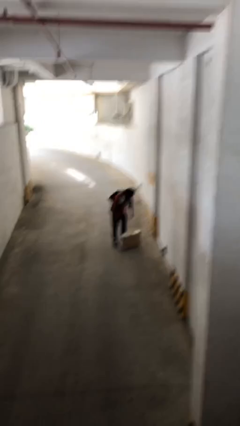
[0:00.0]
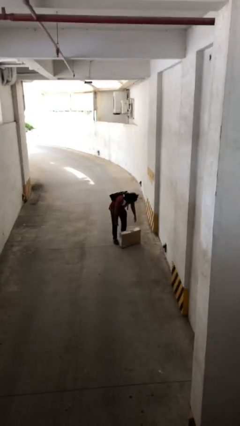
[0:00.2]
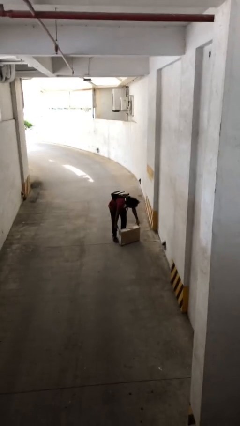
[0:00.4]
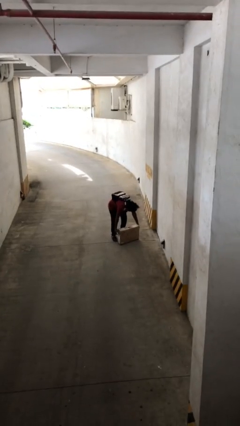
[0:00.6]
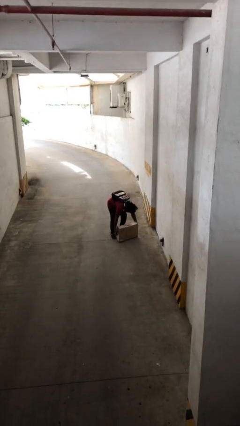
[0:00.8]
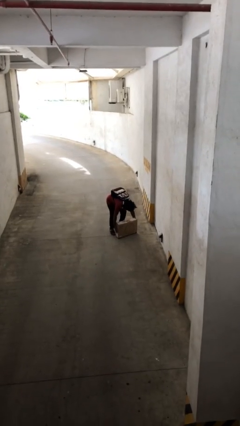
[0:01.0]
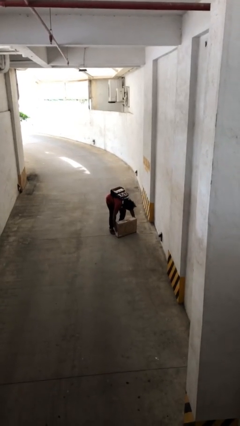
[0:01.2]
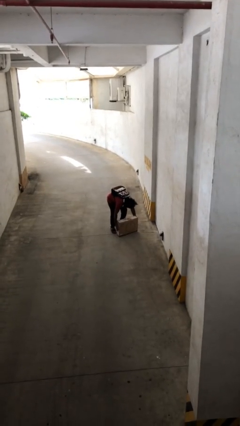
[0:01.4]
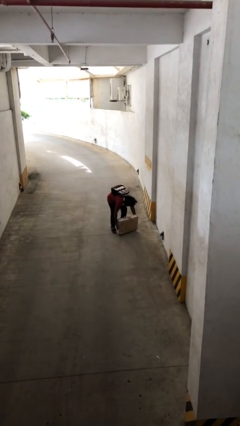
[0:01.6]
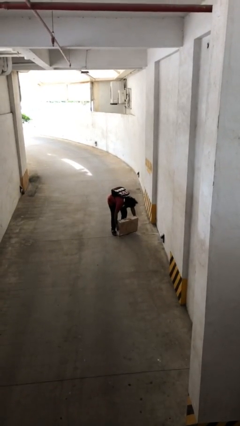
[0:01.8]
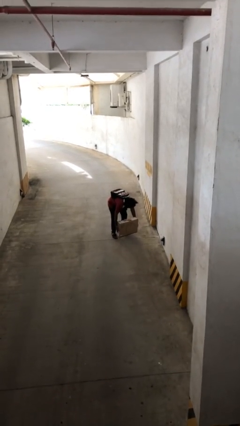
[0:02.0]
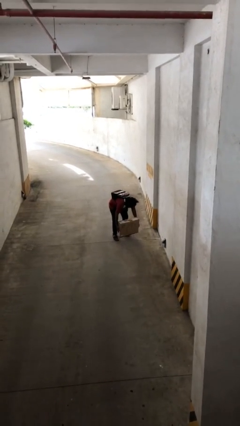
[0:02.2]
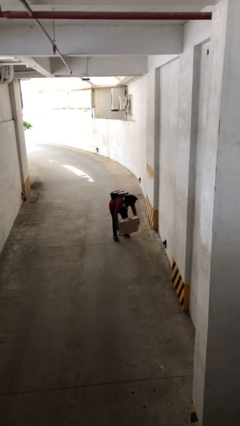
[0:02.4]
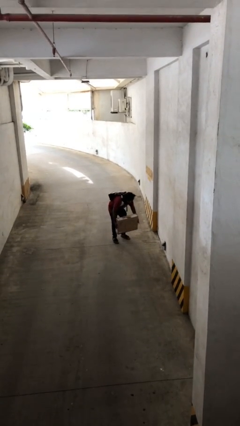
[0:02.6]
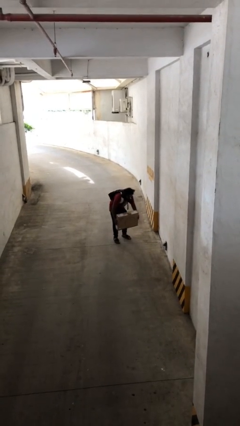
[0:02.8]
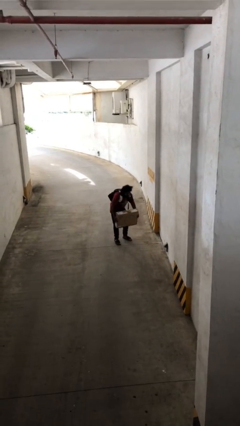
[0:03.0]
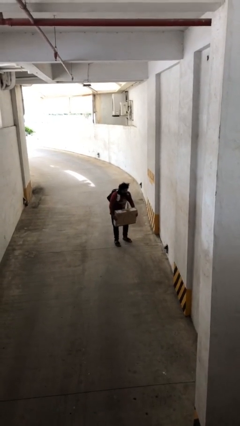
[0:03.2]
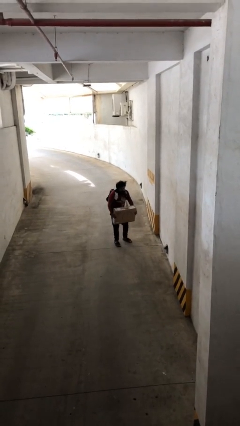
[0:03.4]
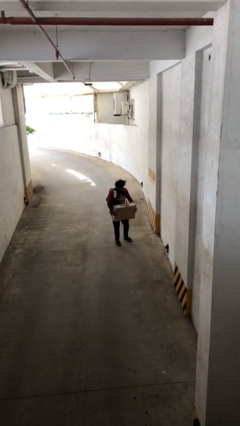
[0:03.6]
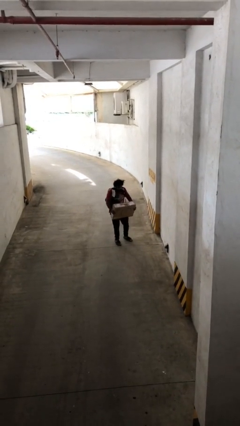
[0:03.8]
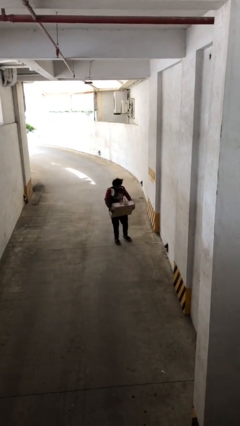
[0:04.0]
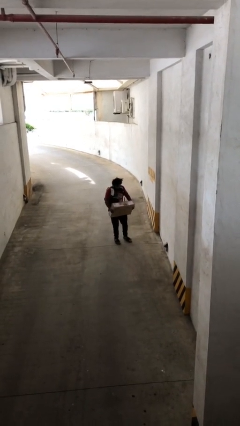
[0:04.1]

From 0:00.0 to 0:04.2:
person picks up object from floor

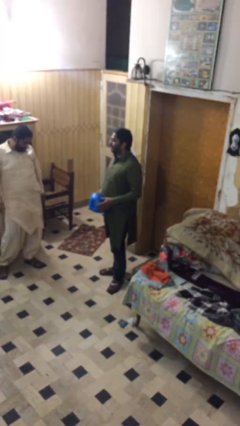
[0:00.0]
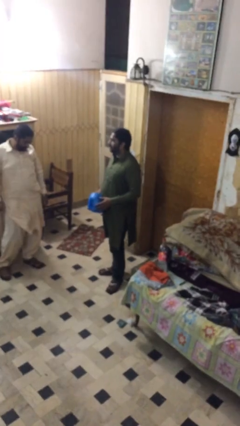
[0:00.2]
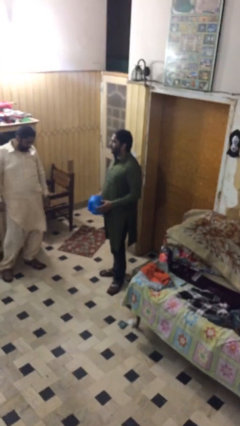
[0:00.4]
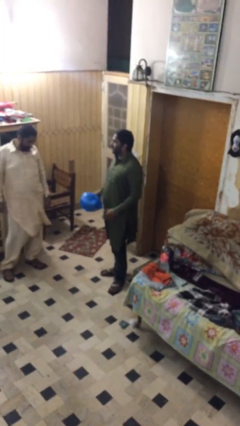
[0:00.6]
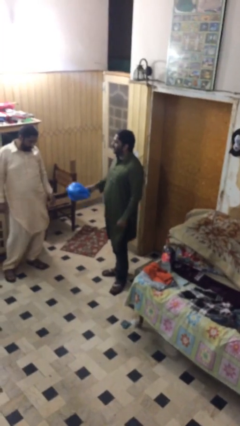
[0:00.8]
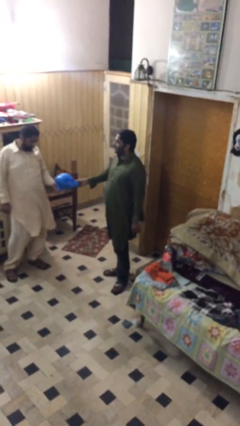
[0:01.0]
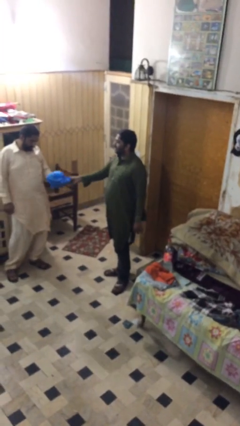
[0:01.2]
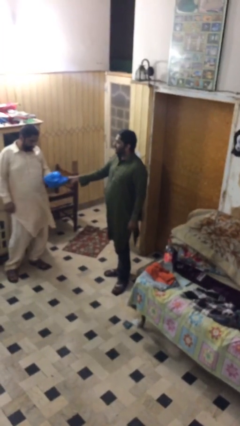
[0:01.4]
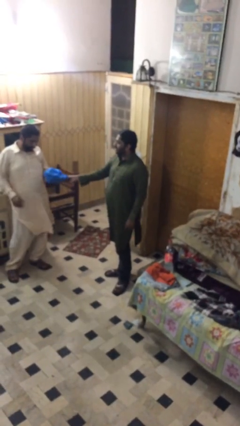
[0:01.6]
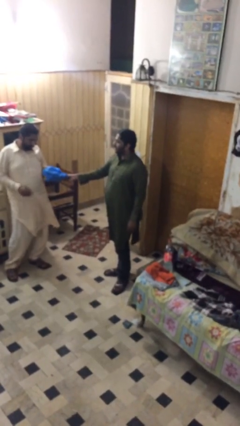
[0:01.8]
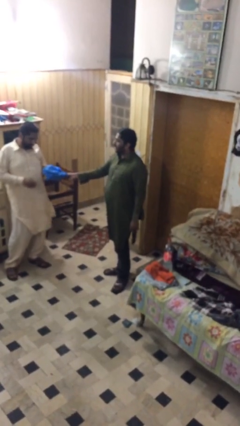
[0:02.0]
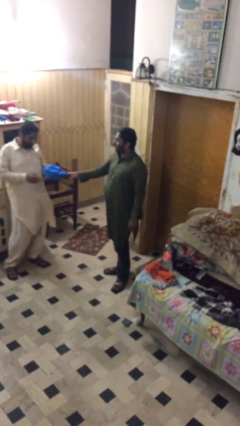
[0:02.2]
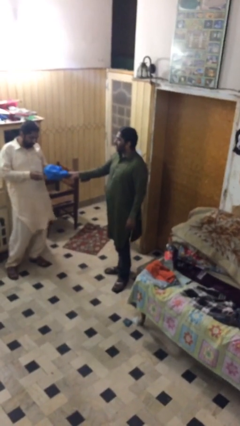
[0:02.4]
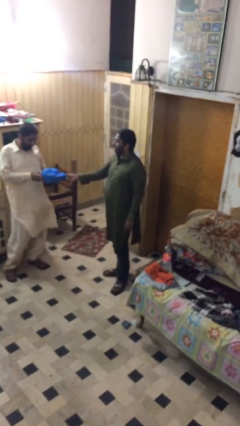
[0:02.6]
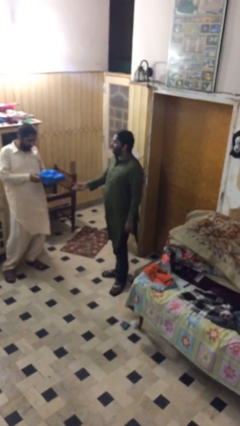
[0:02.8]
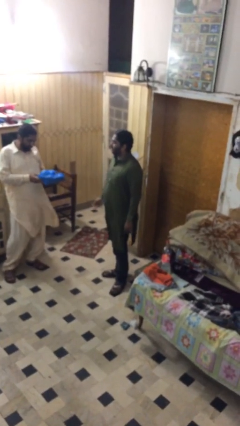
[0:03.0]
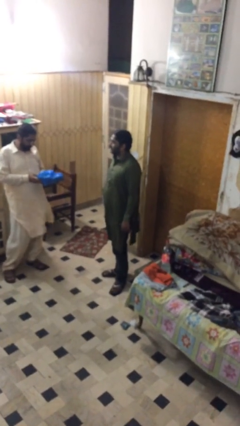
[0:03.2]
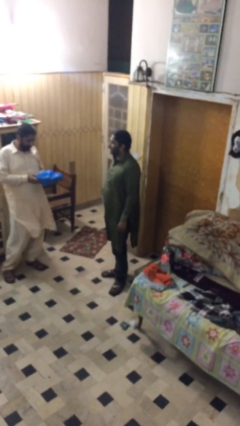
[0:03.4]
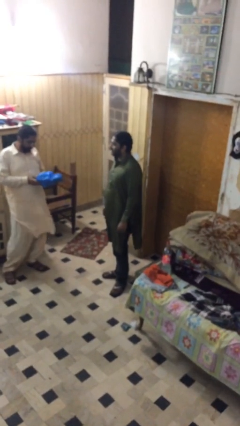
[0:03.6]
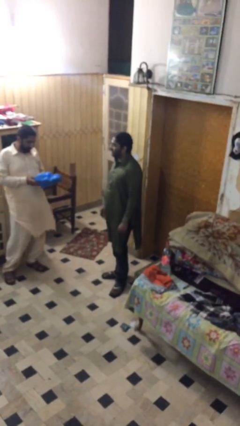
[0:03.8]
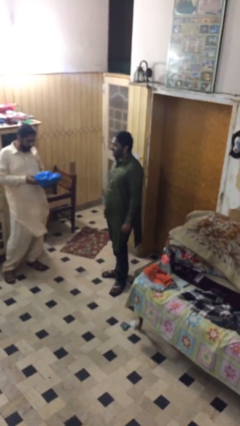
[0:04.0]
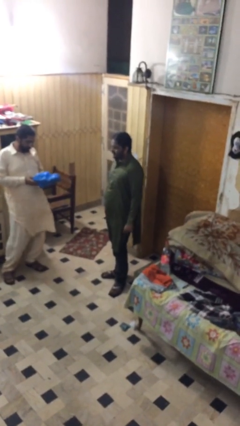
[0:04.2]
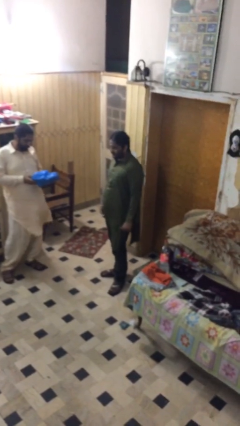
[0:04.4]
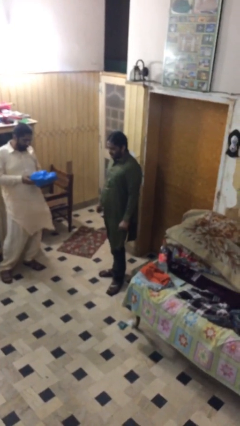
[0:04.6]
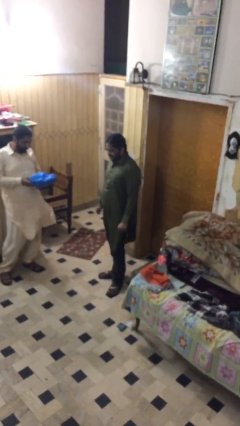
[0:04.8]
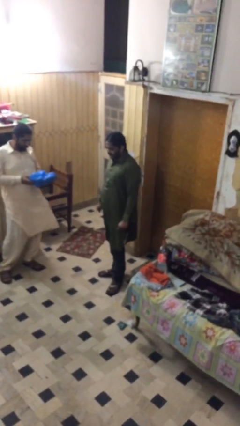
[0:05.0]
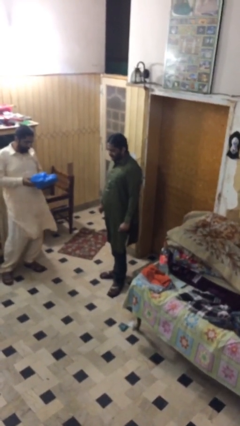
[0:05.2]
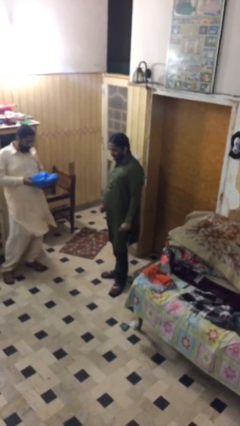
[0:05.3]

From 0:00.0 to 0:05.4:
person transfers object to person

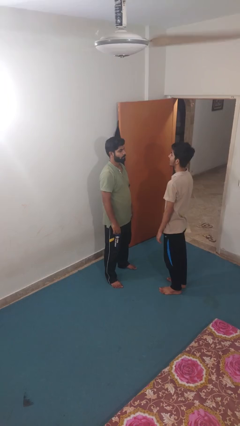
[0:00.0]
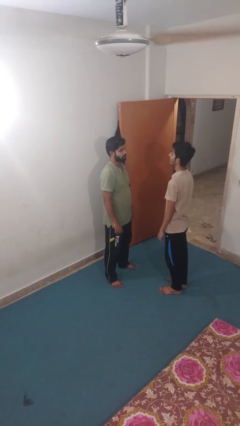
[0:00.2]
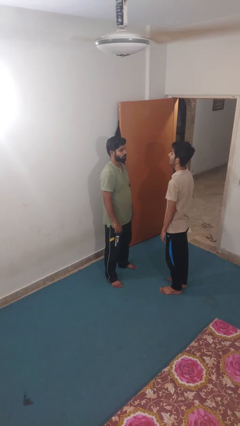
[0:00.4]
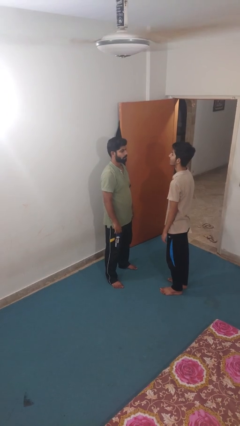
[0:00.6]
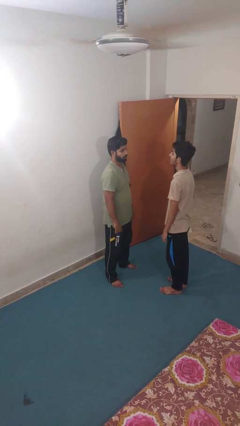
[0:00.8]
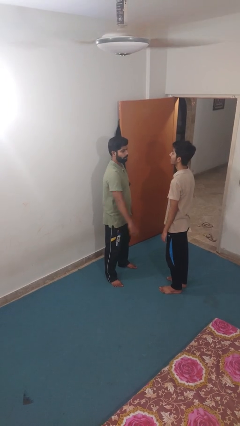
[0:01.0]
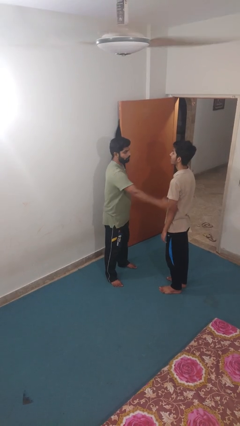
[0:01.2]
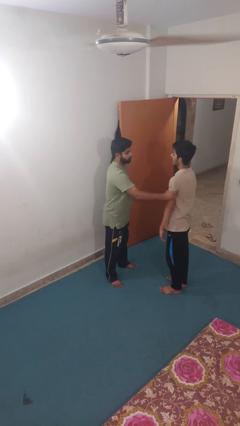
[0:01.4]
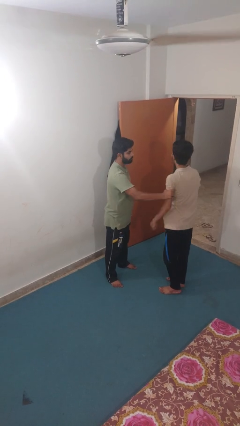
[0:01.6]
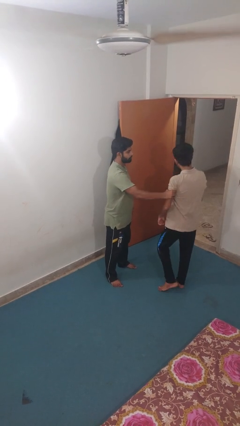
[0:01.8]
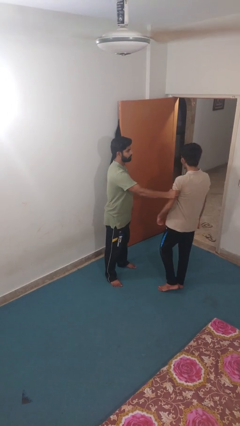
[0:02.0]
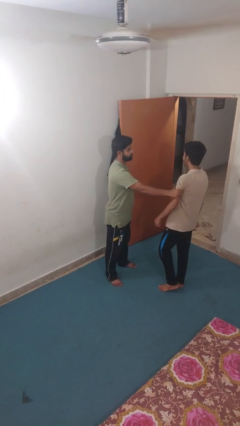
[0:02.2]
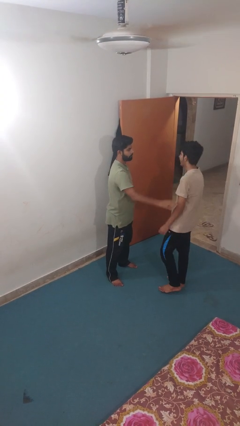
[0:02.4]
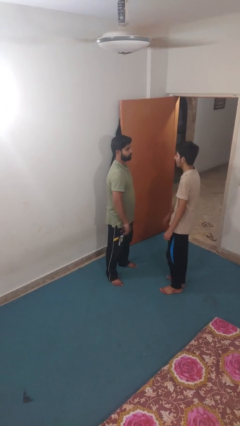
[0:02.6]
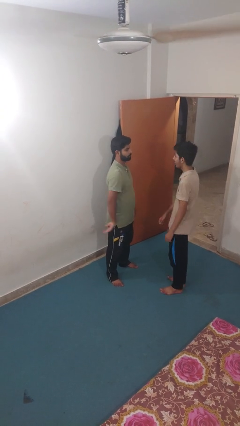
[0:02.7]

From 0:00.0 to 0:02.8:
person grabs person by bicep

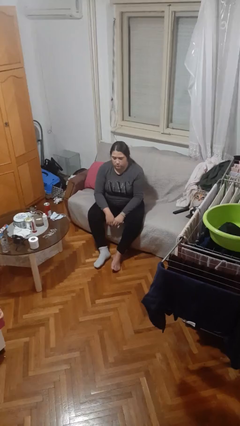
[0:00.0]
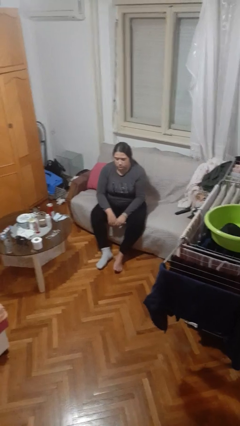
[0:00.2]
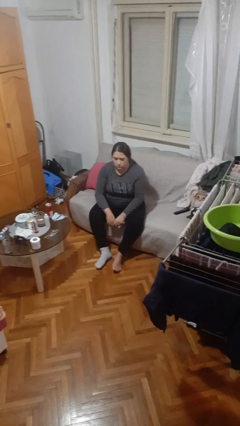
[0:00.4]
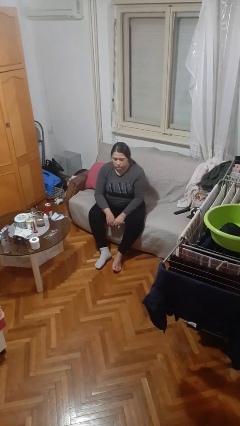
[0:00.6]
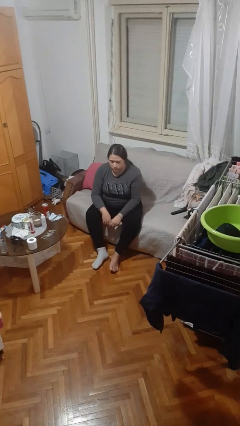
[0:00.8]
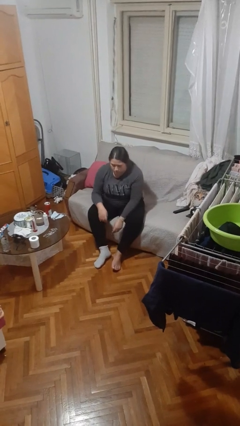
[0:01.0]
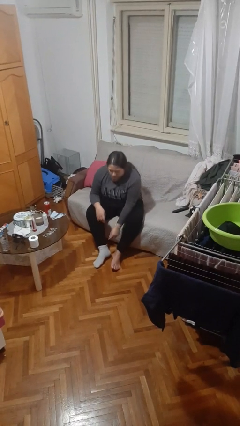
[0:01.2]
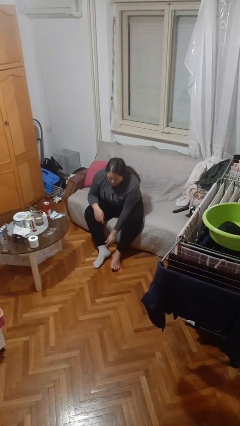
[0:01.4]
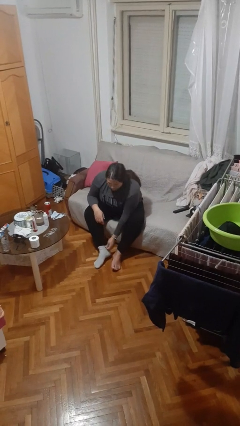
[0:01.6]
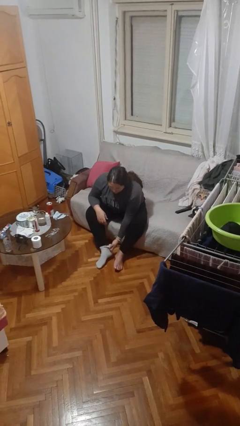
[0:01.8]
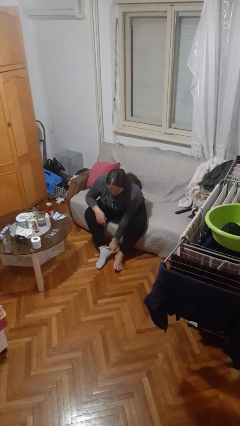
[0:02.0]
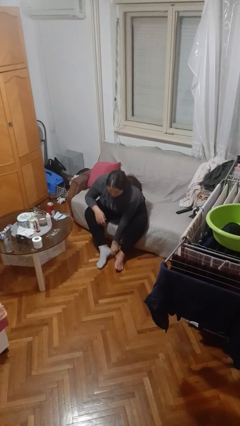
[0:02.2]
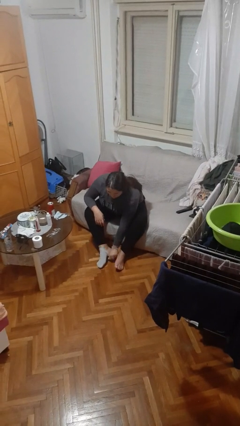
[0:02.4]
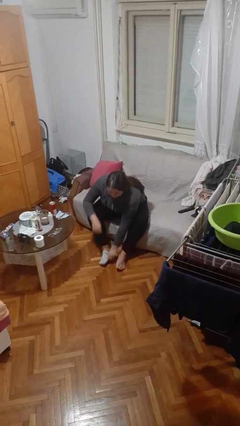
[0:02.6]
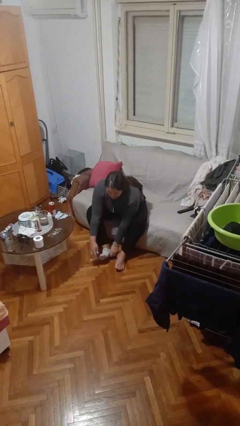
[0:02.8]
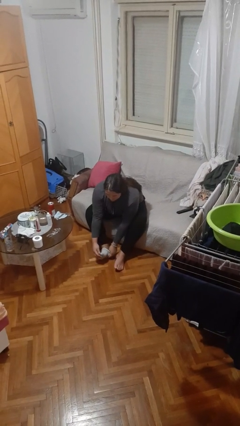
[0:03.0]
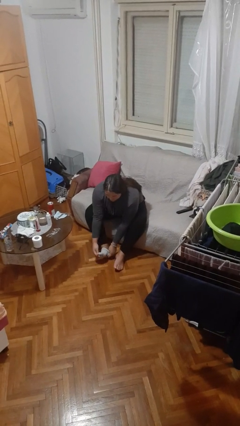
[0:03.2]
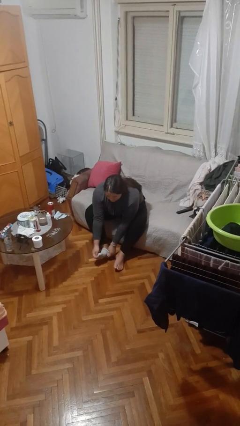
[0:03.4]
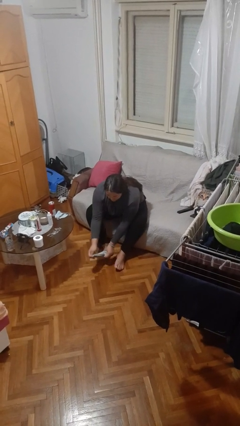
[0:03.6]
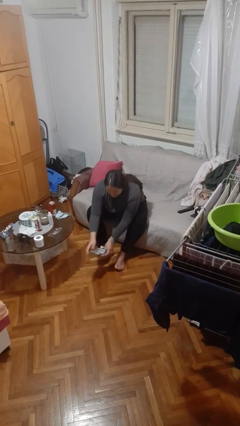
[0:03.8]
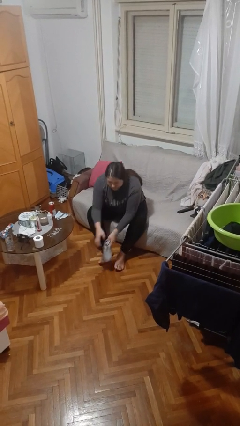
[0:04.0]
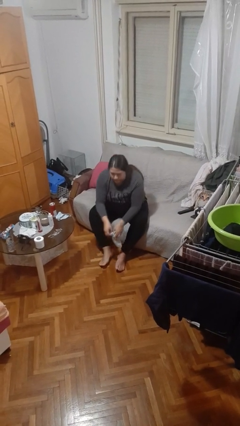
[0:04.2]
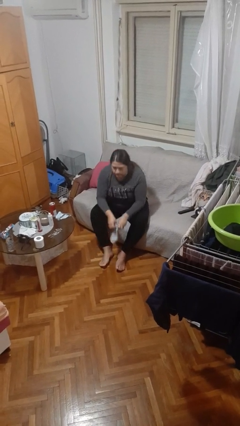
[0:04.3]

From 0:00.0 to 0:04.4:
person takes off socks

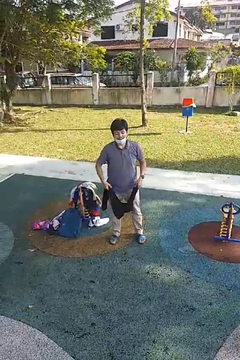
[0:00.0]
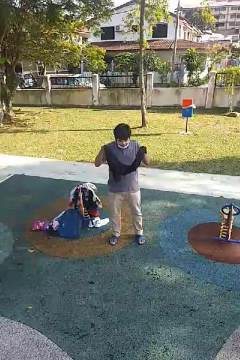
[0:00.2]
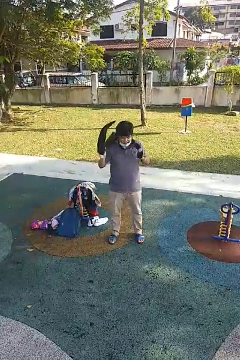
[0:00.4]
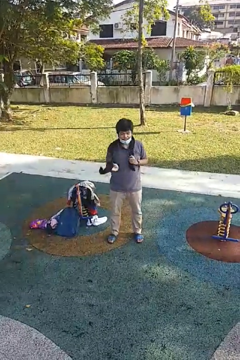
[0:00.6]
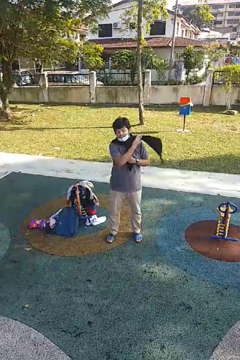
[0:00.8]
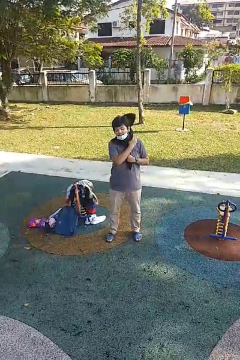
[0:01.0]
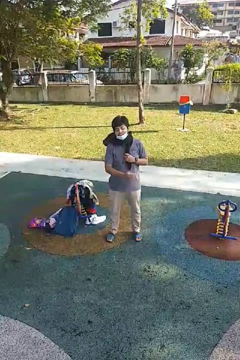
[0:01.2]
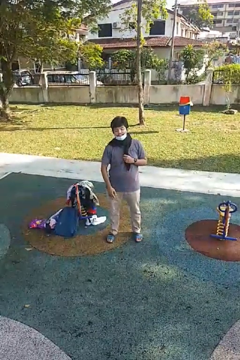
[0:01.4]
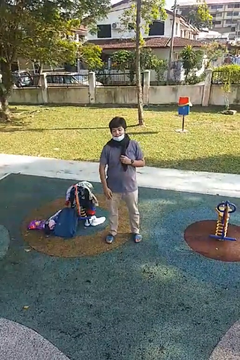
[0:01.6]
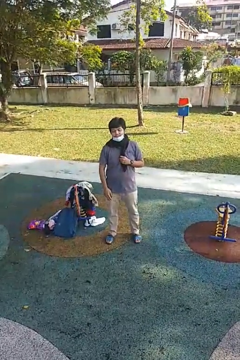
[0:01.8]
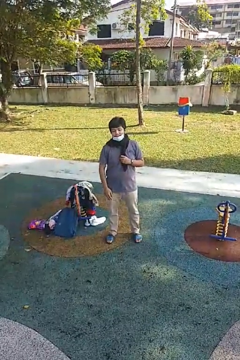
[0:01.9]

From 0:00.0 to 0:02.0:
person puts on scarf
